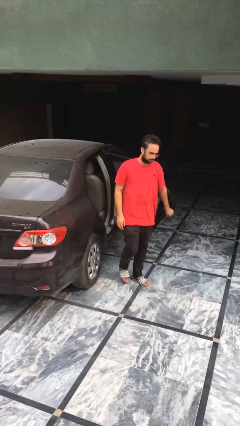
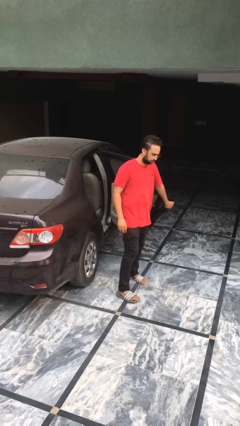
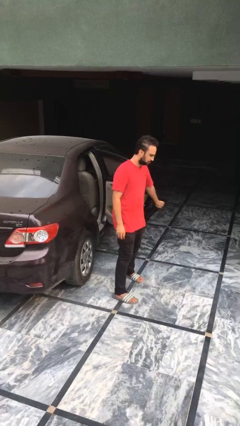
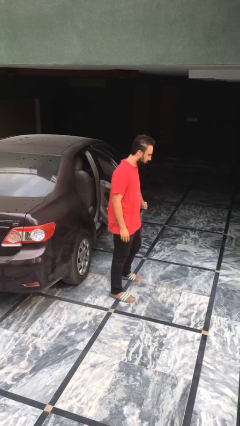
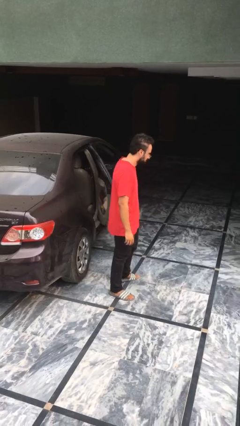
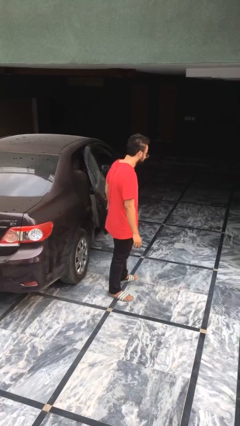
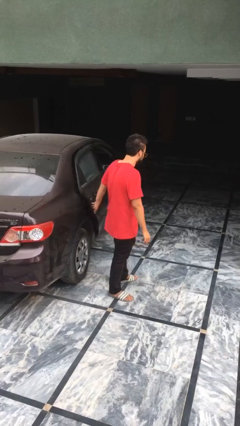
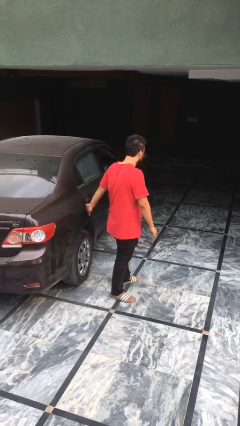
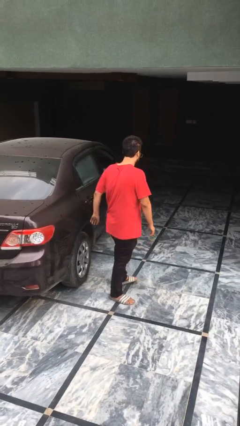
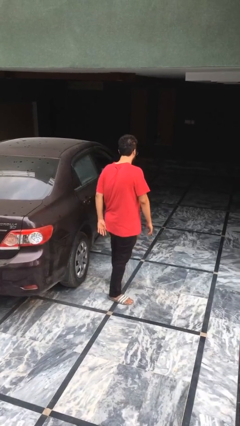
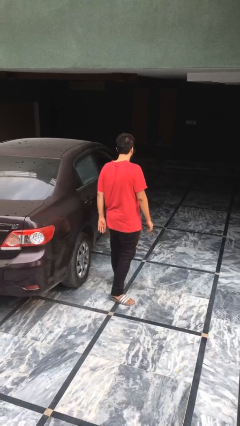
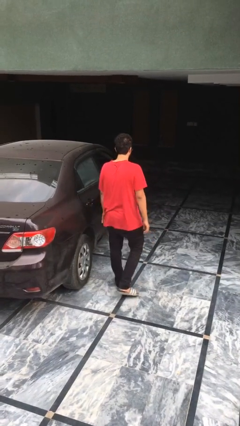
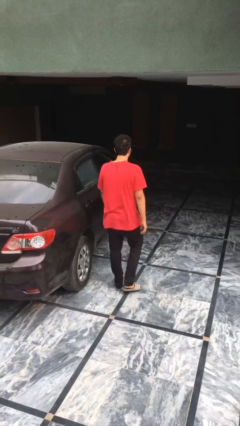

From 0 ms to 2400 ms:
person closes car door

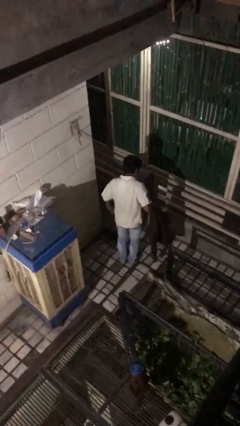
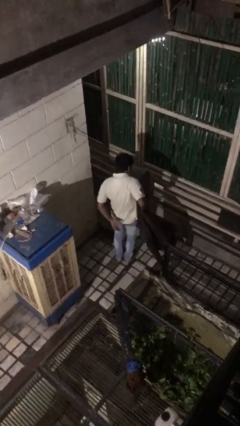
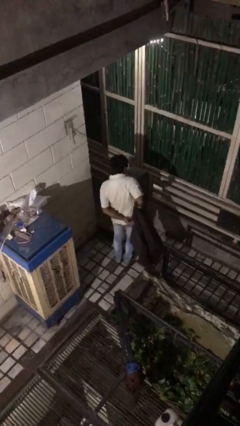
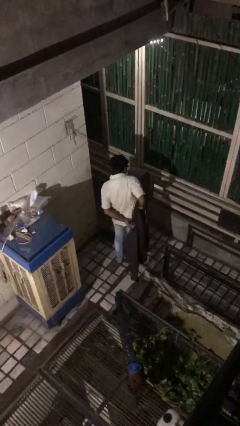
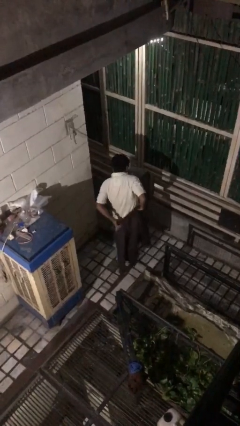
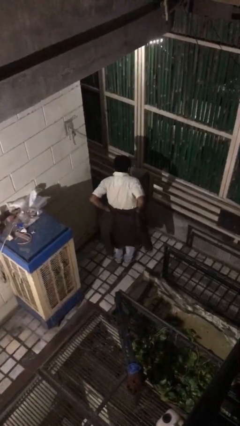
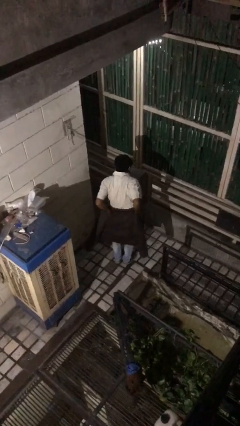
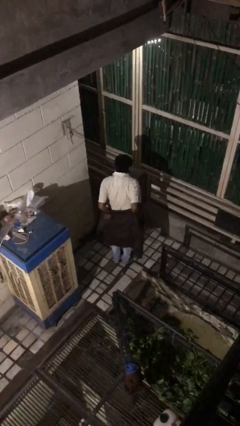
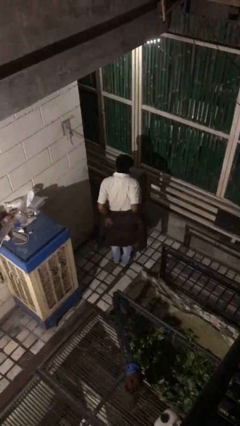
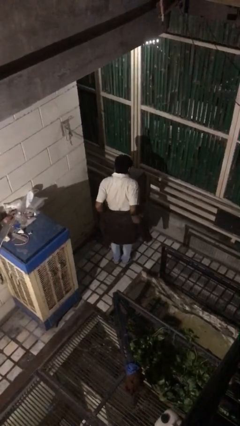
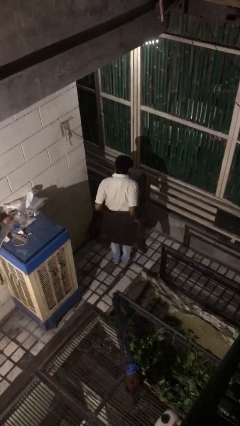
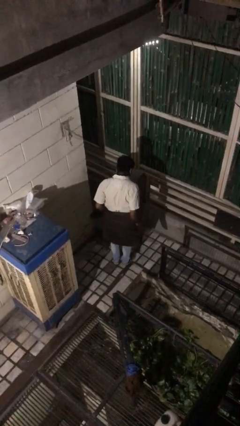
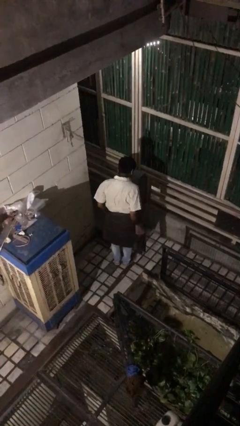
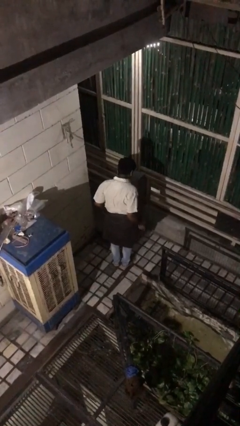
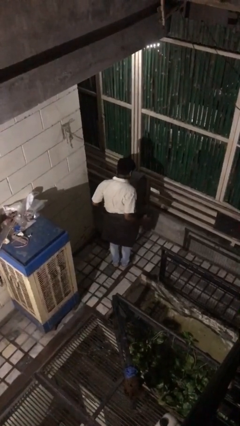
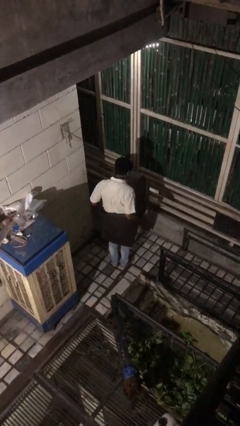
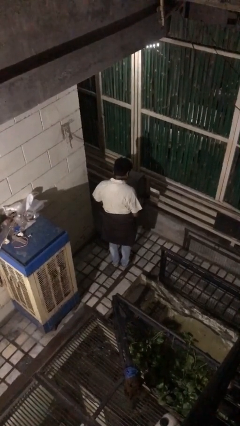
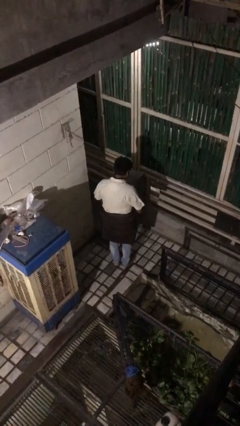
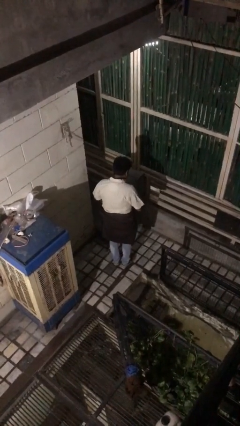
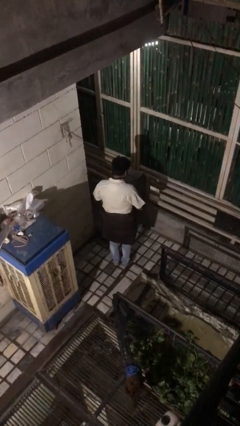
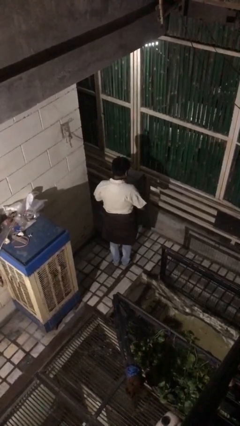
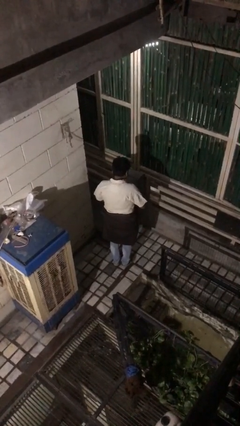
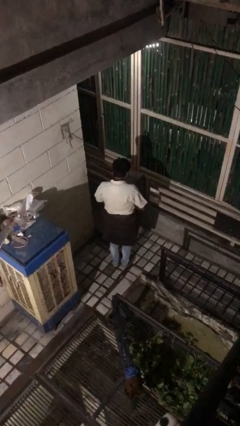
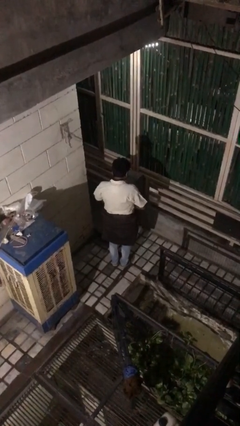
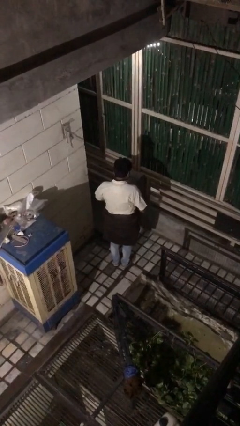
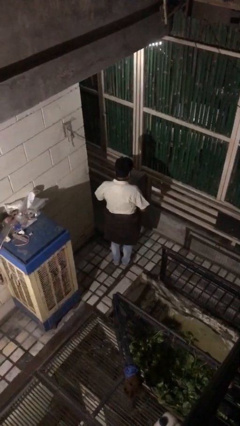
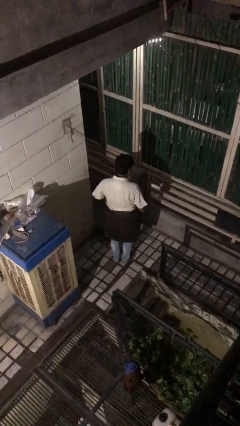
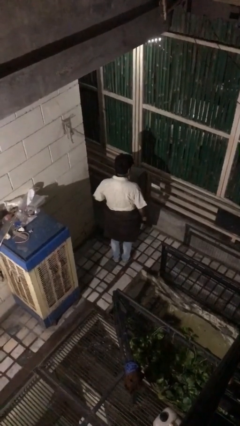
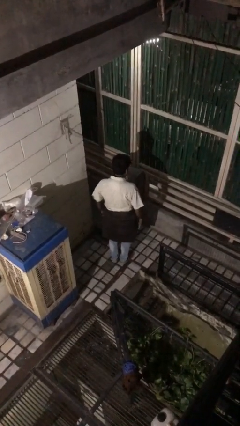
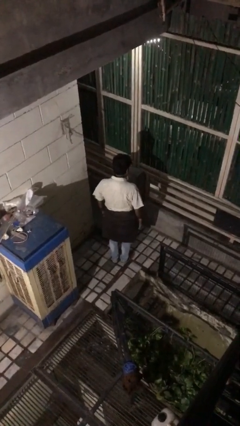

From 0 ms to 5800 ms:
person ties jacket around waist

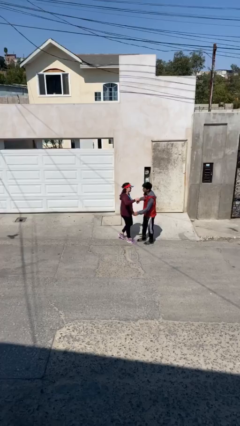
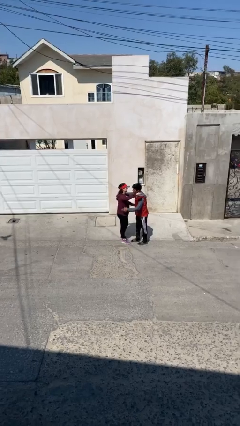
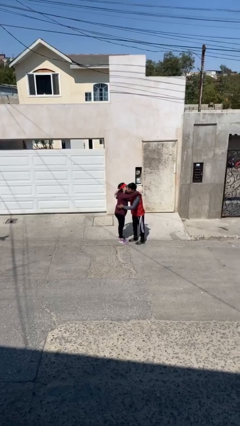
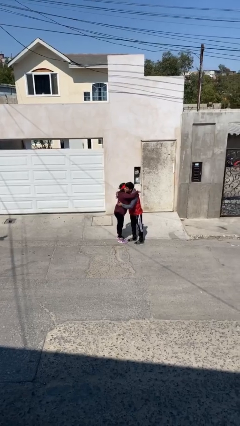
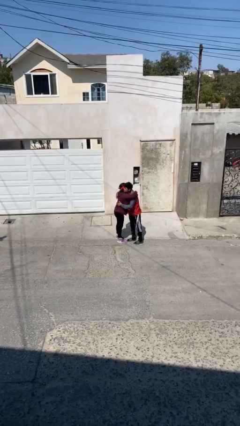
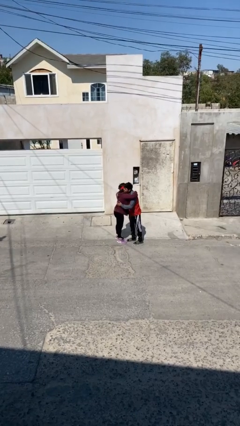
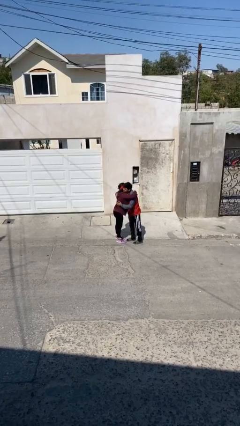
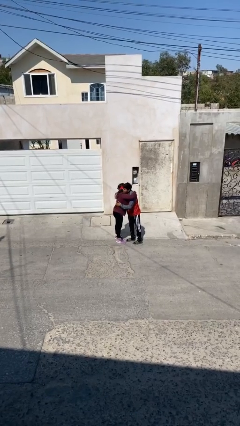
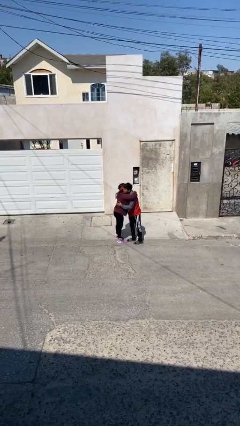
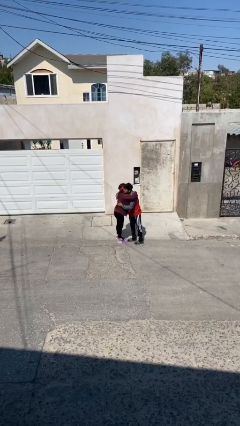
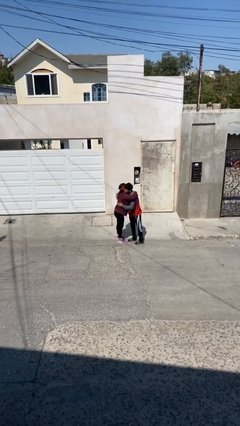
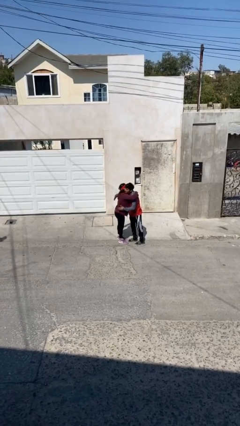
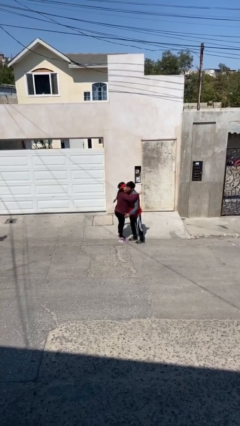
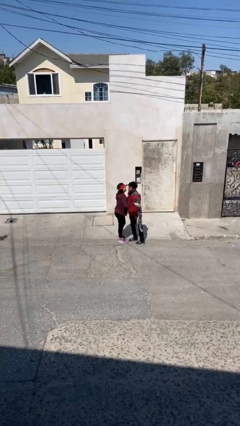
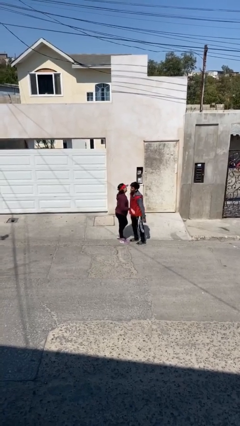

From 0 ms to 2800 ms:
person embraces person

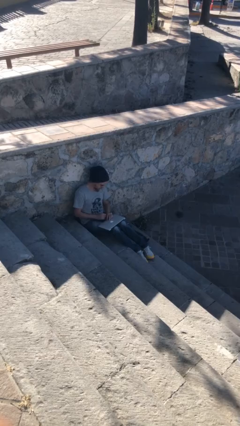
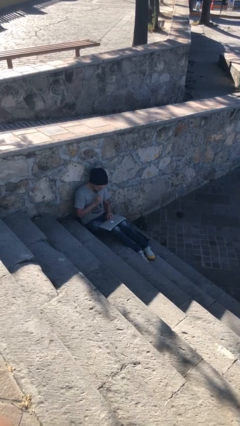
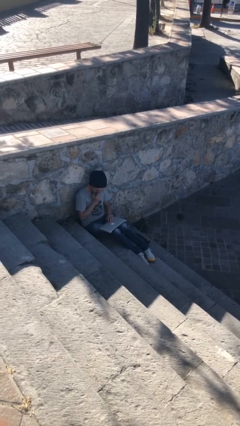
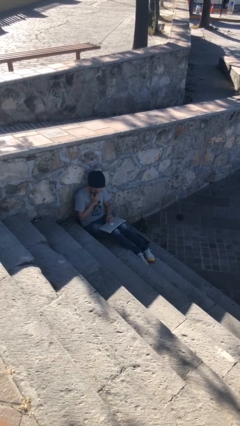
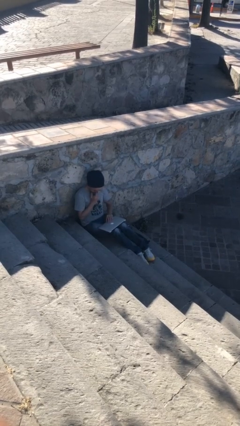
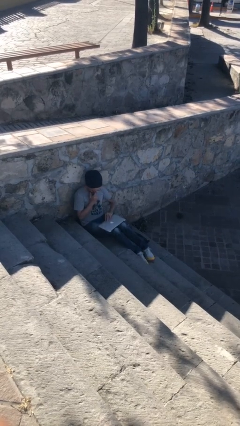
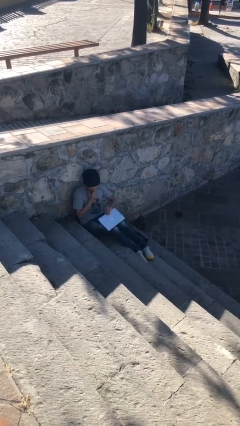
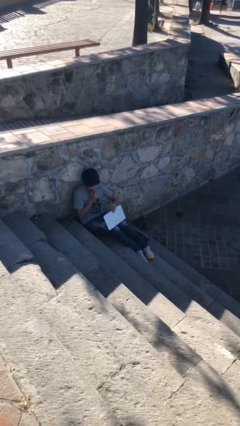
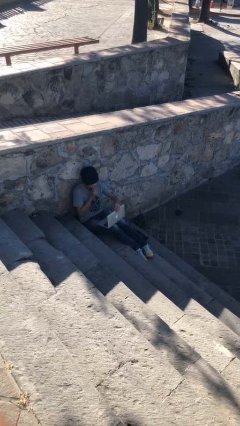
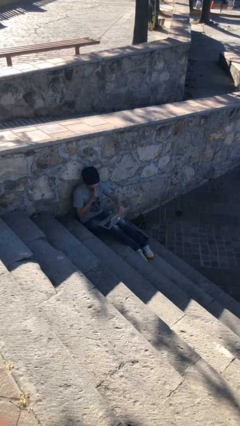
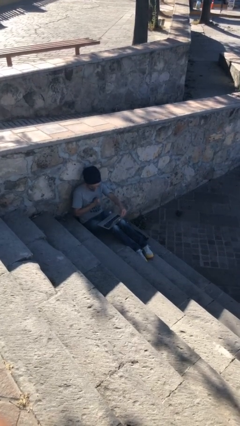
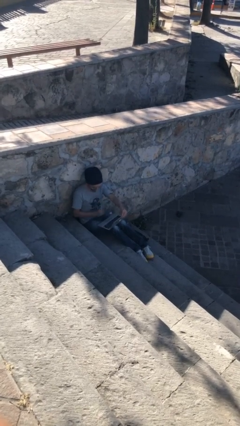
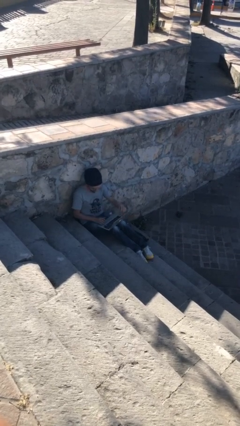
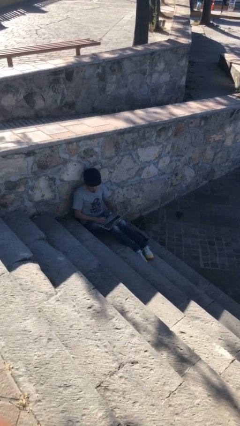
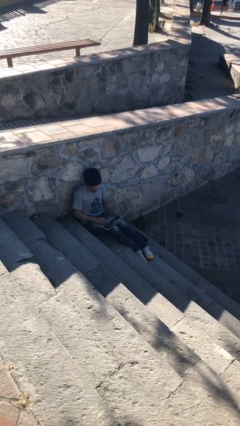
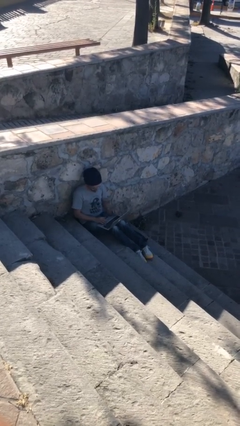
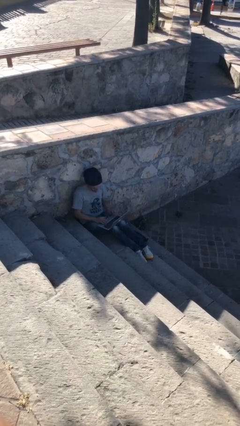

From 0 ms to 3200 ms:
person interacts with laptop

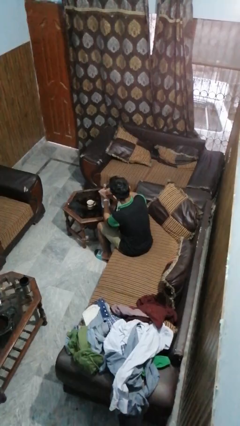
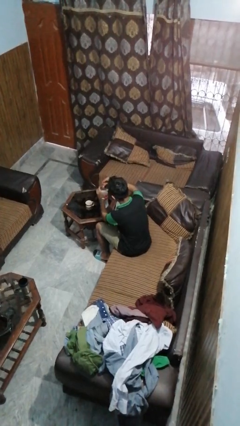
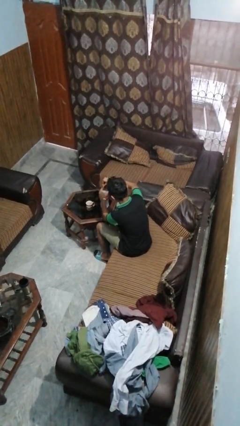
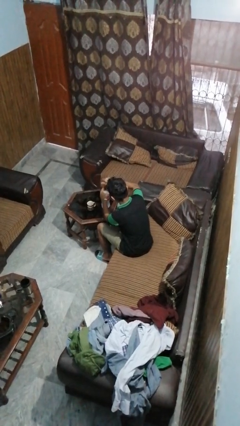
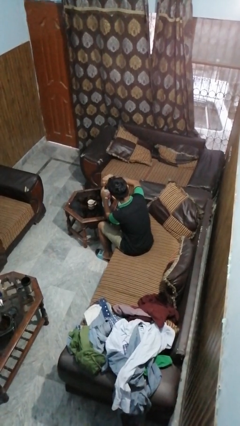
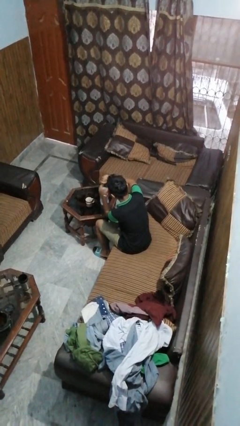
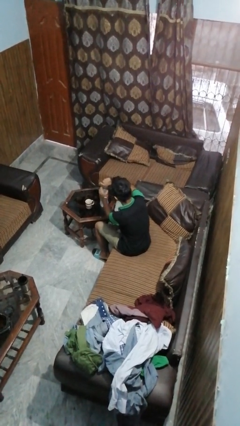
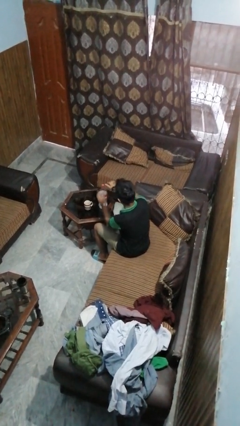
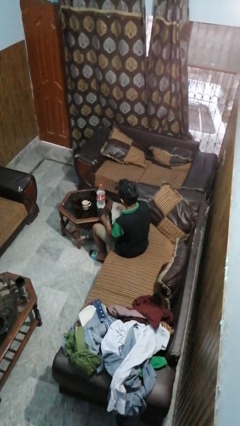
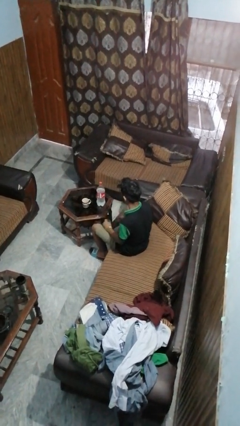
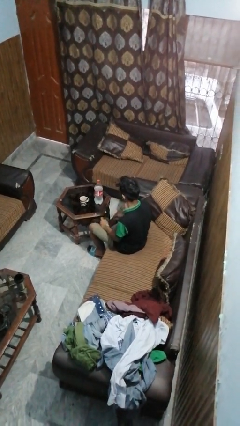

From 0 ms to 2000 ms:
person screws lid to bottle

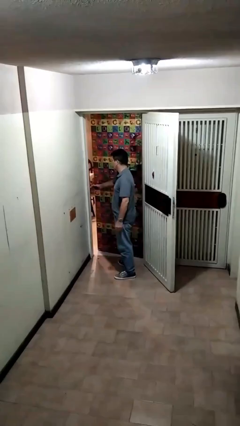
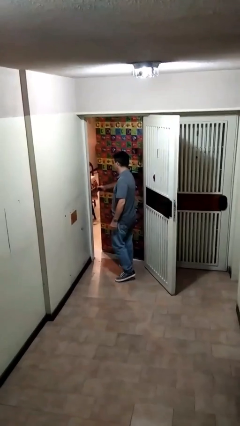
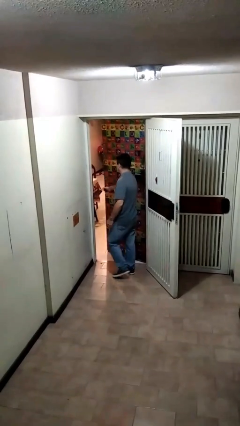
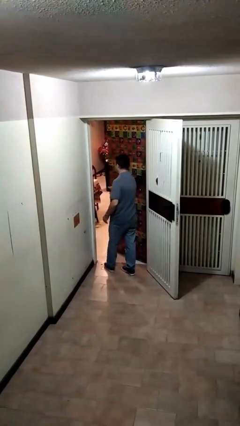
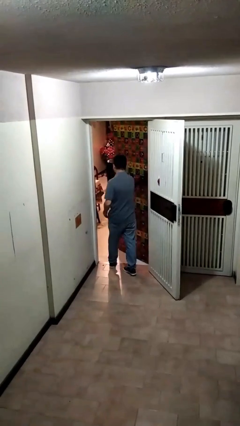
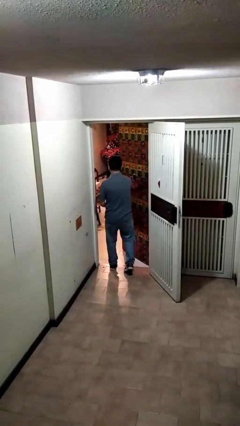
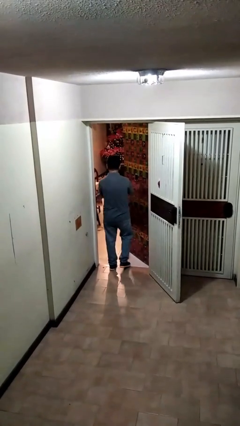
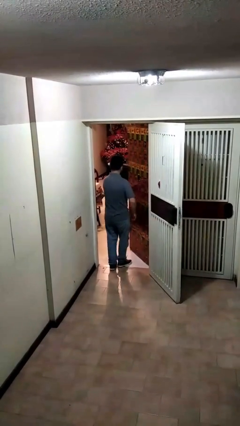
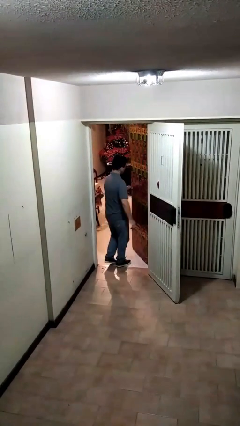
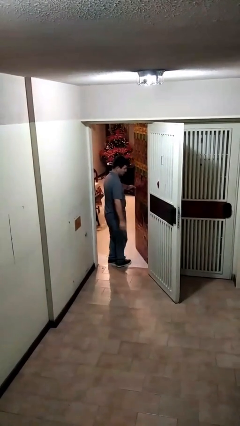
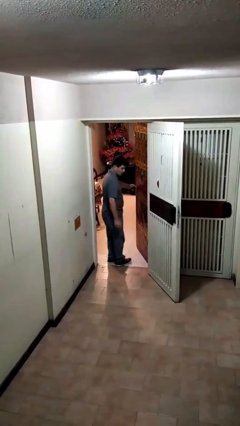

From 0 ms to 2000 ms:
person opens facility door
